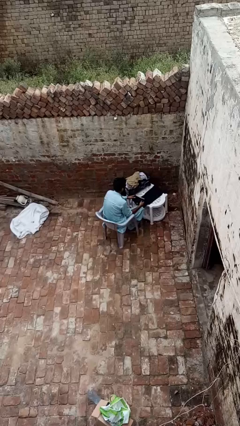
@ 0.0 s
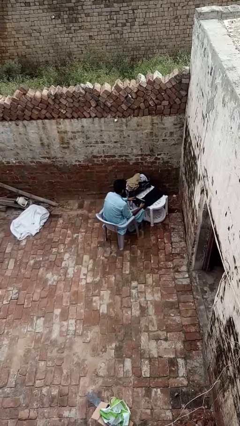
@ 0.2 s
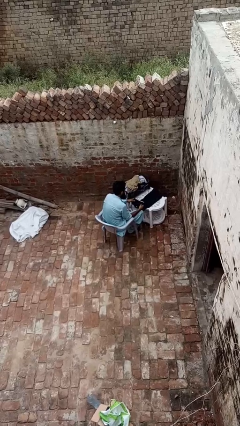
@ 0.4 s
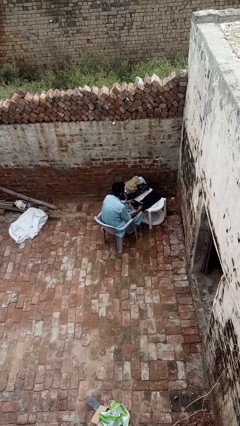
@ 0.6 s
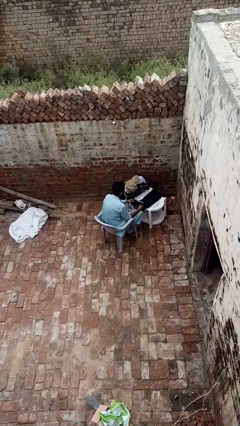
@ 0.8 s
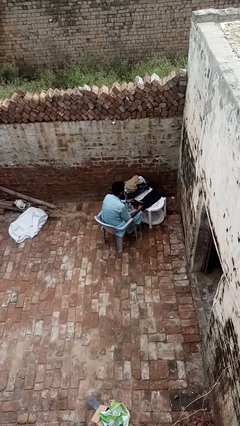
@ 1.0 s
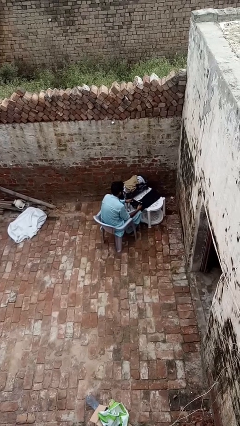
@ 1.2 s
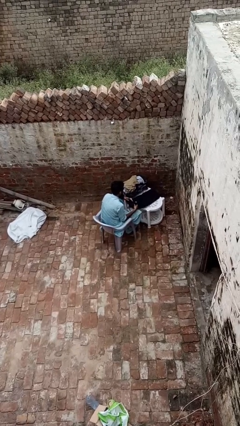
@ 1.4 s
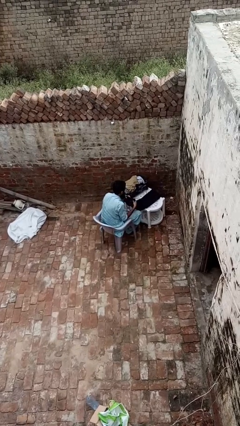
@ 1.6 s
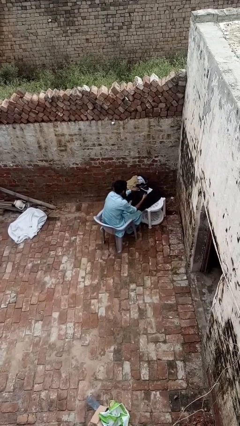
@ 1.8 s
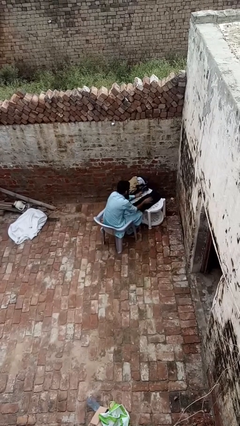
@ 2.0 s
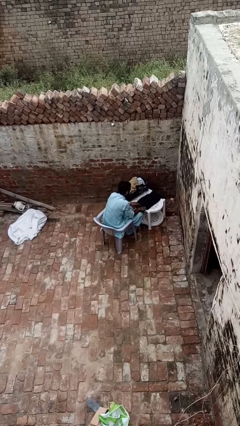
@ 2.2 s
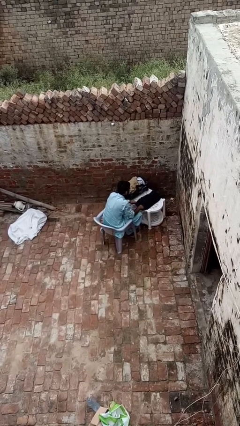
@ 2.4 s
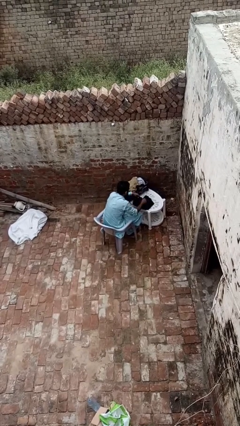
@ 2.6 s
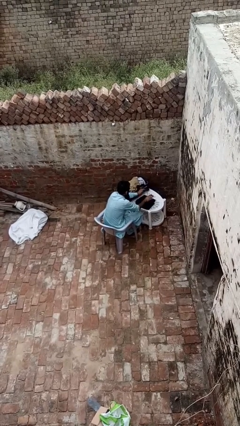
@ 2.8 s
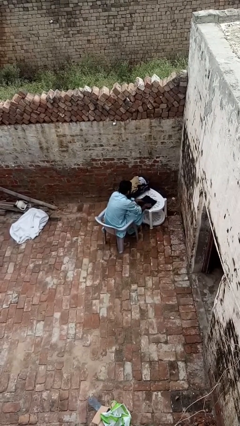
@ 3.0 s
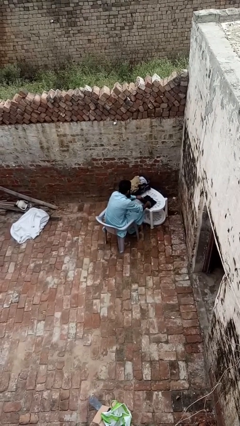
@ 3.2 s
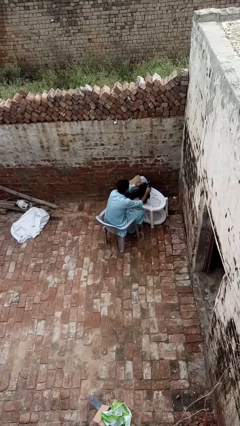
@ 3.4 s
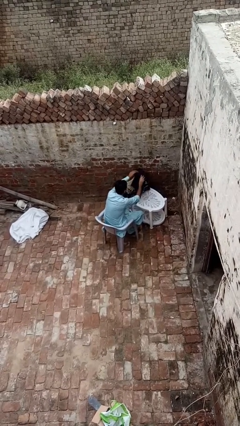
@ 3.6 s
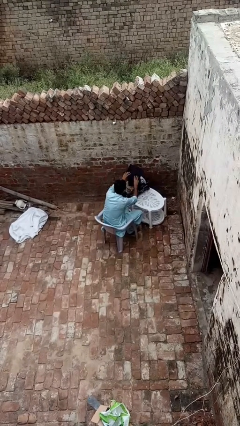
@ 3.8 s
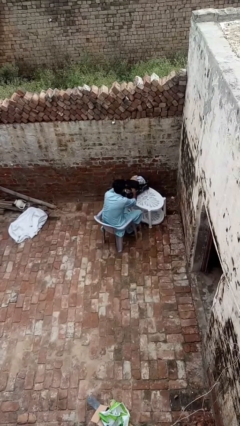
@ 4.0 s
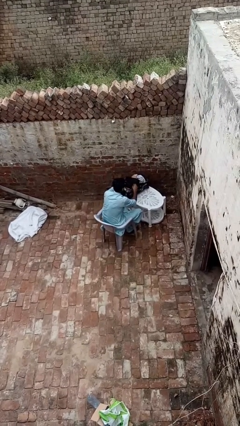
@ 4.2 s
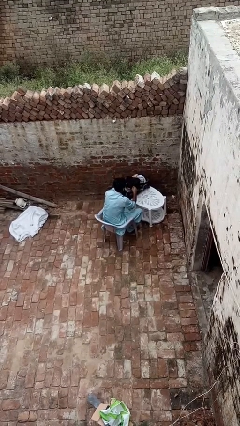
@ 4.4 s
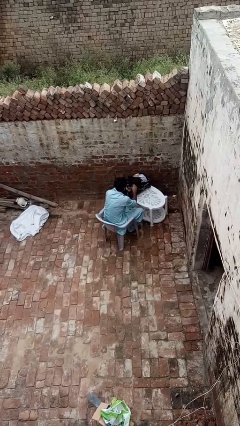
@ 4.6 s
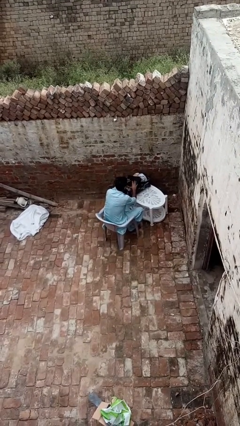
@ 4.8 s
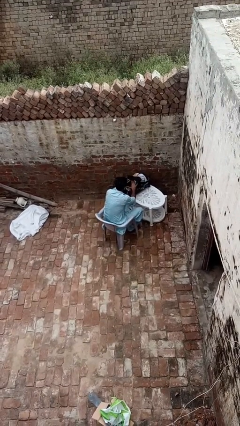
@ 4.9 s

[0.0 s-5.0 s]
person folds pants

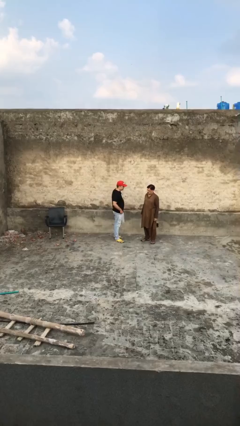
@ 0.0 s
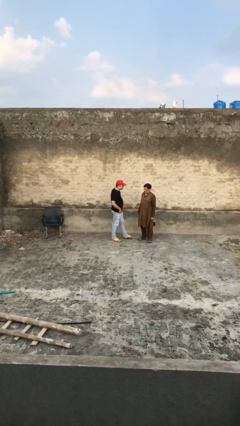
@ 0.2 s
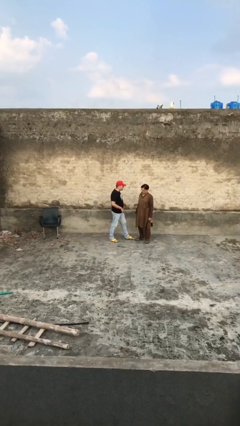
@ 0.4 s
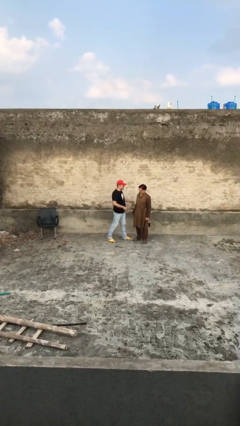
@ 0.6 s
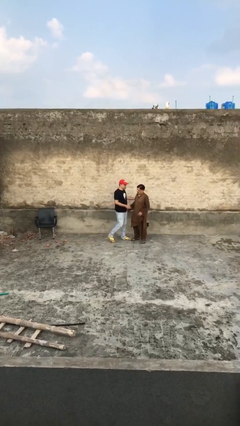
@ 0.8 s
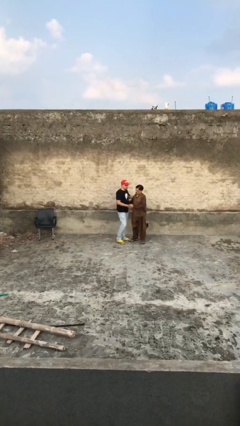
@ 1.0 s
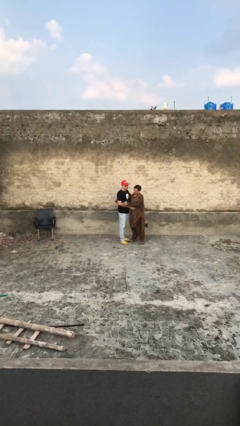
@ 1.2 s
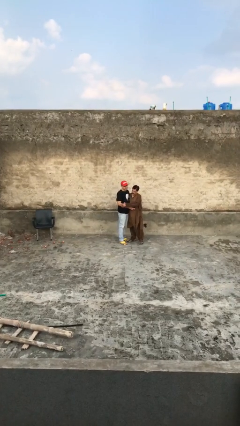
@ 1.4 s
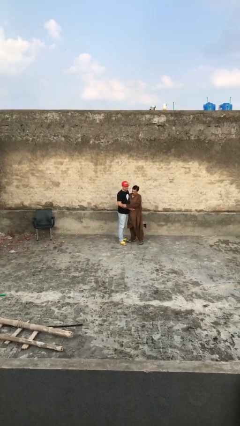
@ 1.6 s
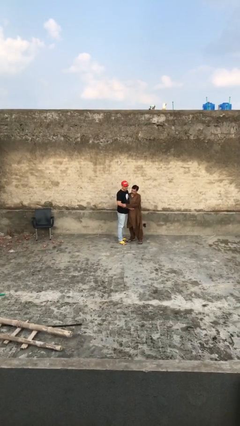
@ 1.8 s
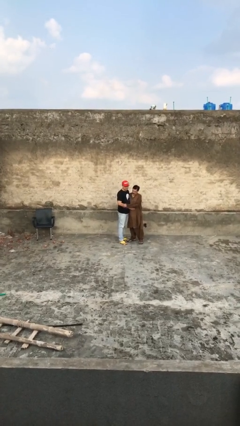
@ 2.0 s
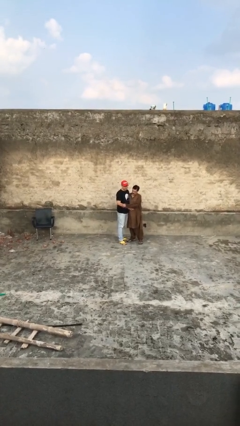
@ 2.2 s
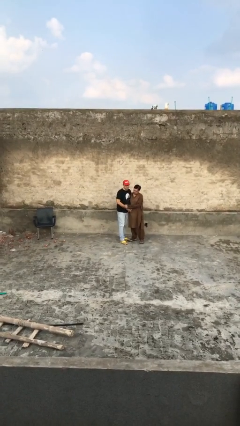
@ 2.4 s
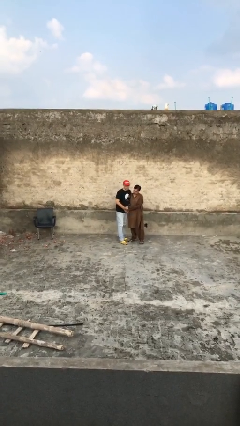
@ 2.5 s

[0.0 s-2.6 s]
person embraces person

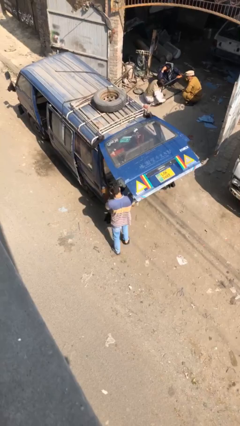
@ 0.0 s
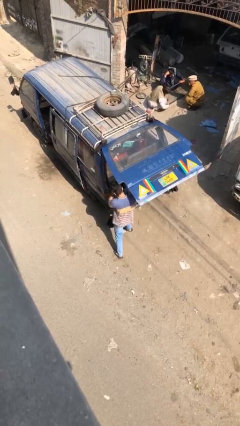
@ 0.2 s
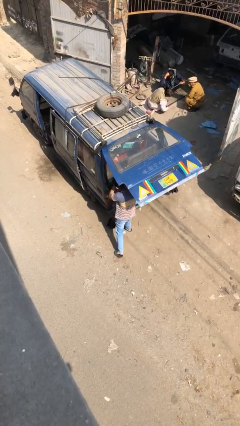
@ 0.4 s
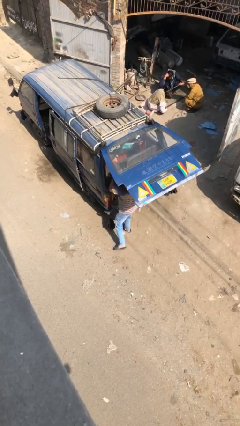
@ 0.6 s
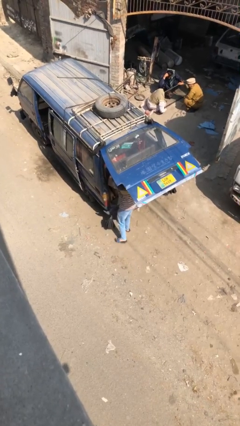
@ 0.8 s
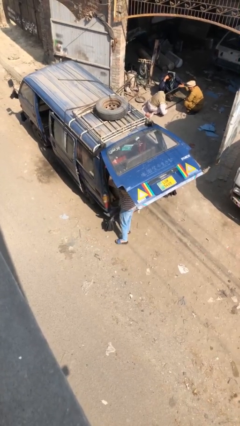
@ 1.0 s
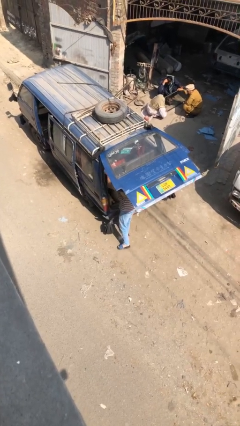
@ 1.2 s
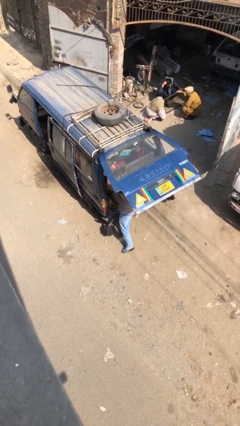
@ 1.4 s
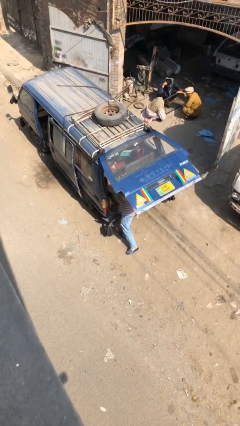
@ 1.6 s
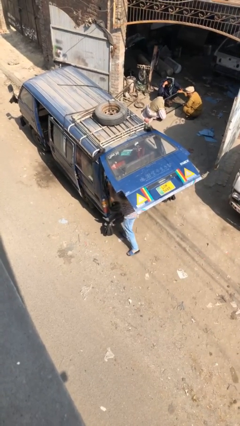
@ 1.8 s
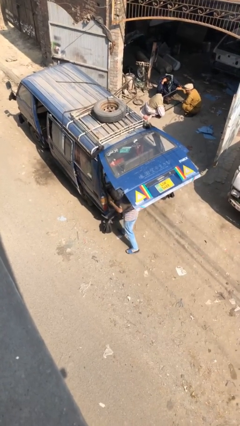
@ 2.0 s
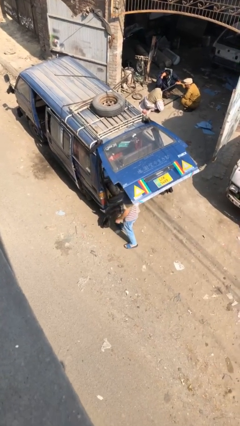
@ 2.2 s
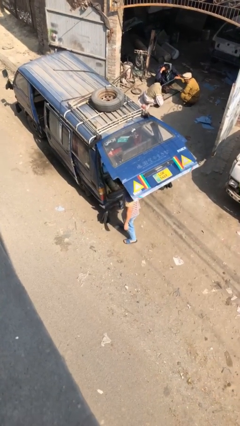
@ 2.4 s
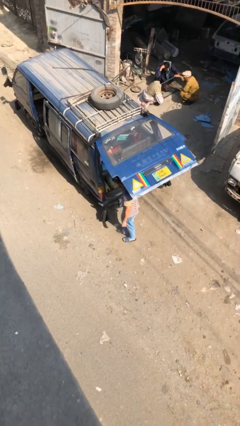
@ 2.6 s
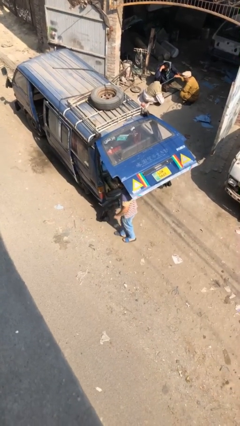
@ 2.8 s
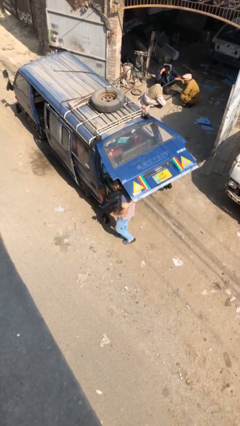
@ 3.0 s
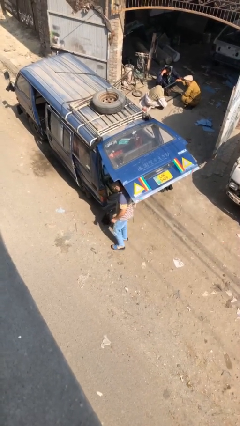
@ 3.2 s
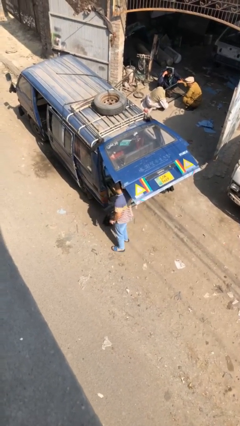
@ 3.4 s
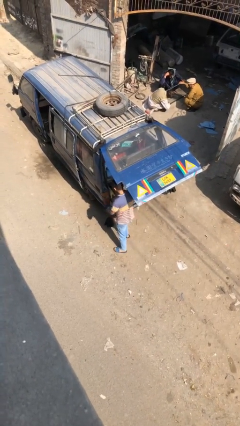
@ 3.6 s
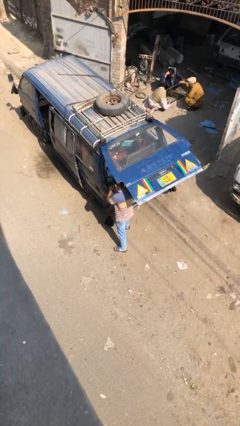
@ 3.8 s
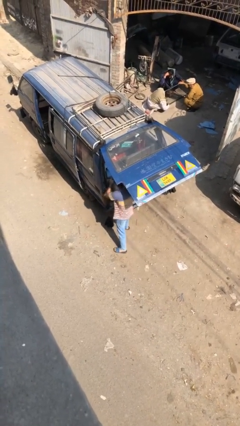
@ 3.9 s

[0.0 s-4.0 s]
person loads car

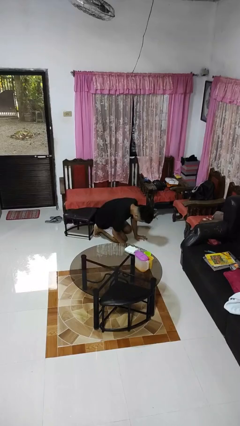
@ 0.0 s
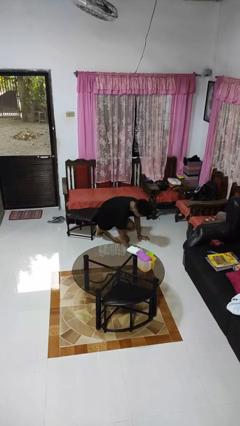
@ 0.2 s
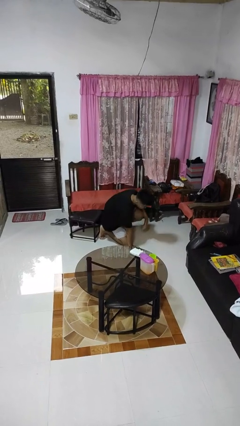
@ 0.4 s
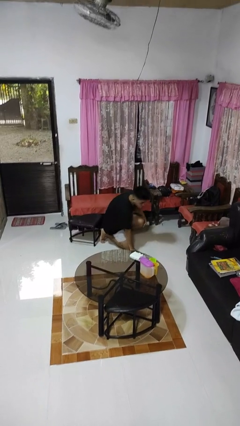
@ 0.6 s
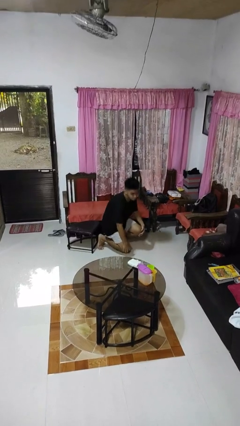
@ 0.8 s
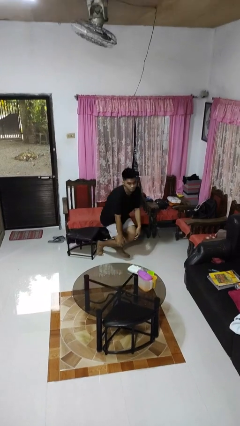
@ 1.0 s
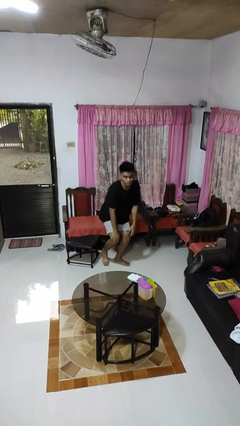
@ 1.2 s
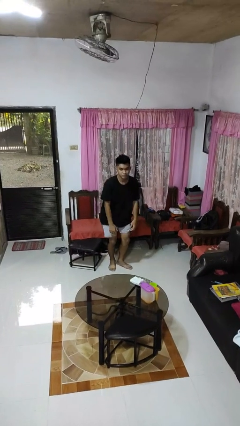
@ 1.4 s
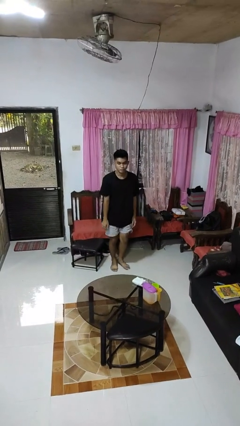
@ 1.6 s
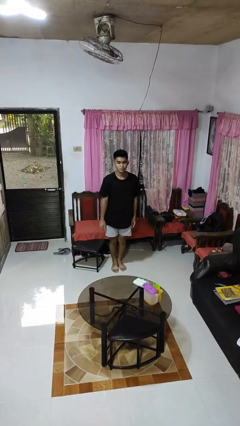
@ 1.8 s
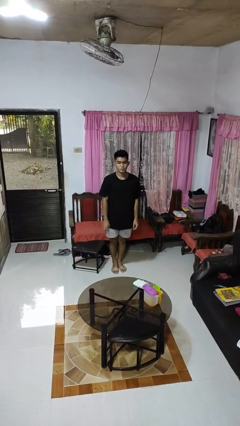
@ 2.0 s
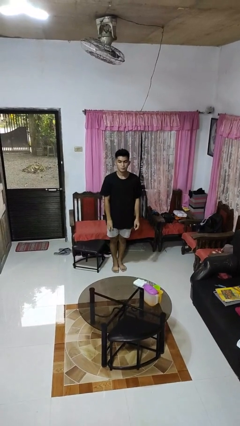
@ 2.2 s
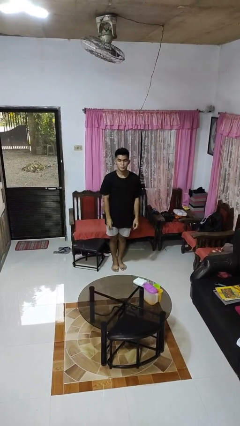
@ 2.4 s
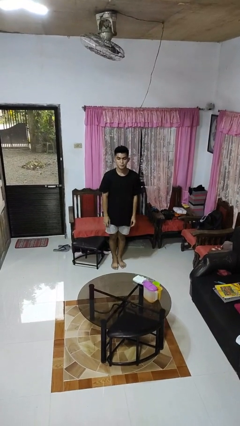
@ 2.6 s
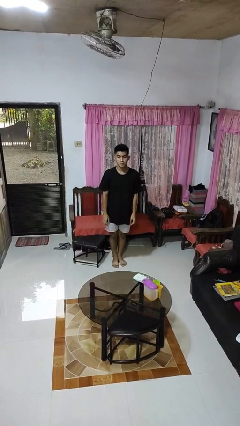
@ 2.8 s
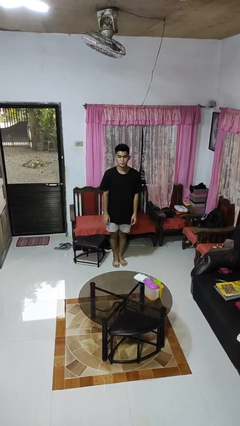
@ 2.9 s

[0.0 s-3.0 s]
person stands up from floor

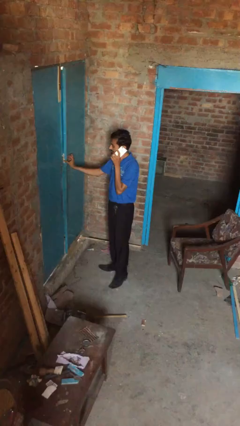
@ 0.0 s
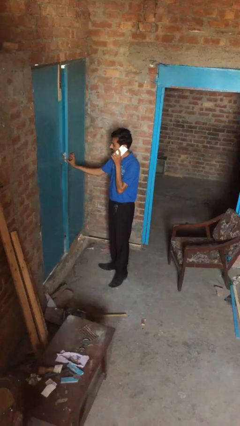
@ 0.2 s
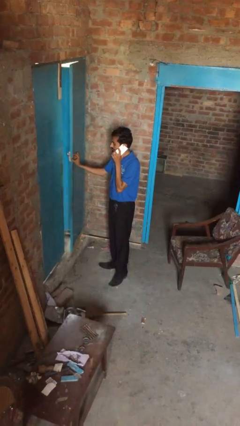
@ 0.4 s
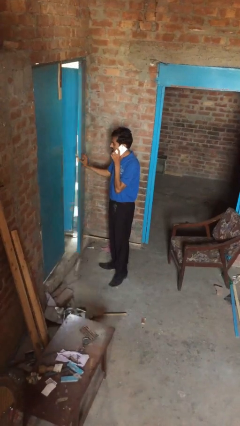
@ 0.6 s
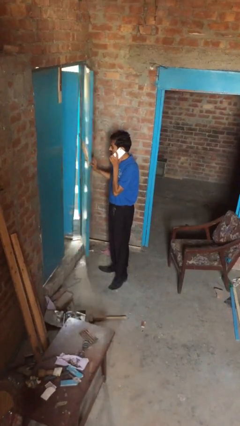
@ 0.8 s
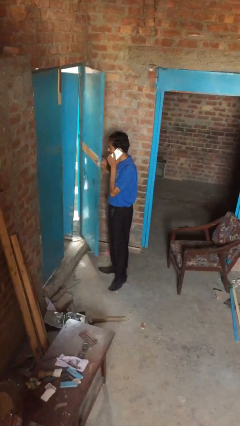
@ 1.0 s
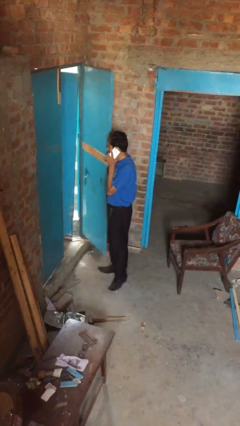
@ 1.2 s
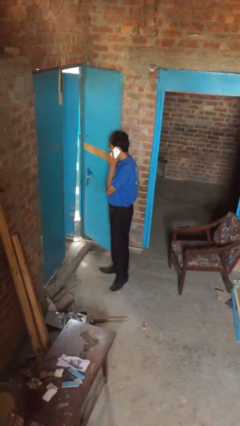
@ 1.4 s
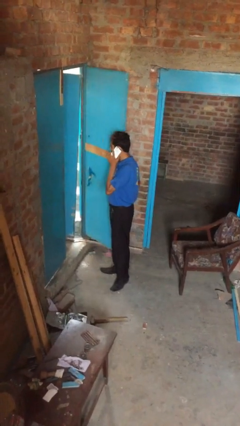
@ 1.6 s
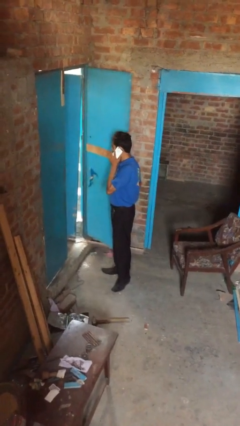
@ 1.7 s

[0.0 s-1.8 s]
person opens facility door

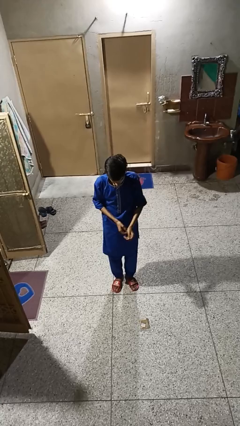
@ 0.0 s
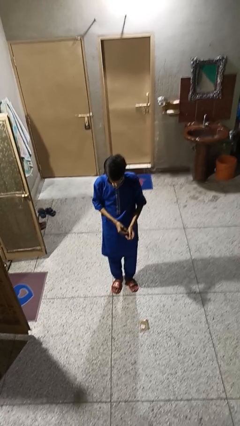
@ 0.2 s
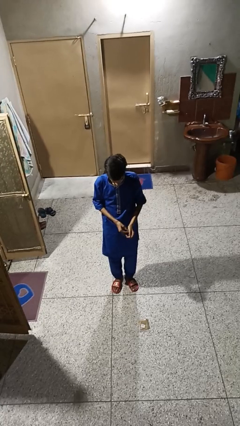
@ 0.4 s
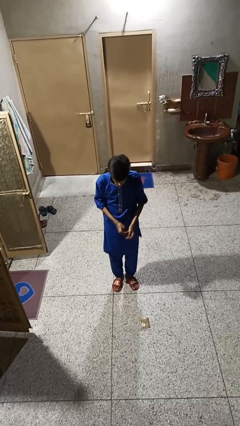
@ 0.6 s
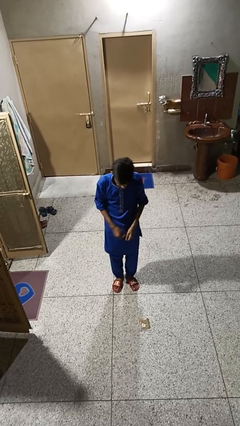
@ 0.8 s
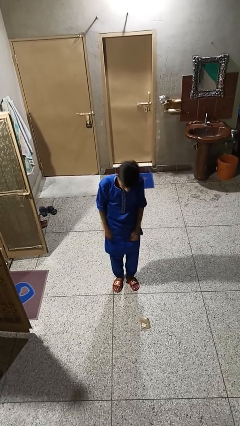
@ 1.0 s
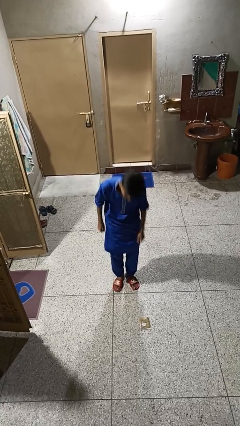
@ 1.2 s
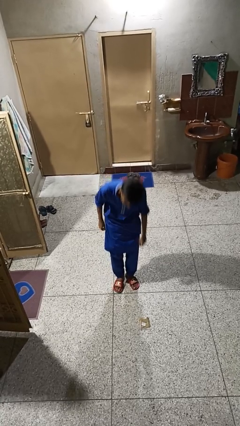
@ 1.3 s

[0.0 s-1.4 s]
person picks up object from floor
